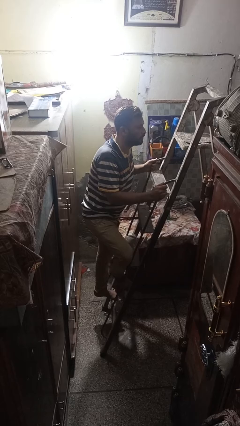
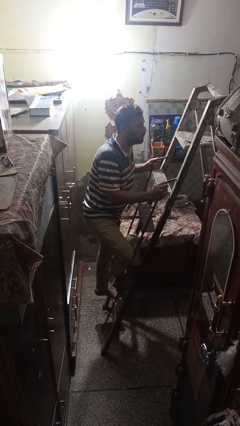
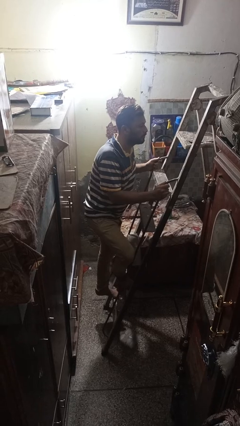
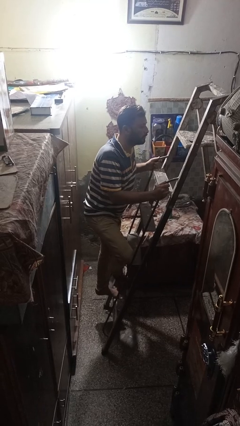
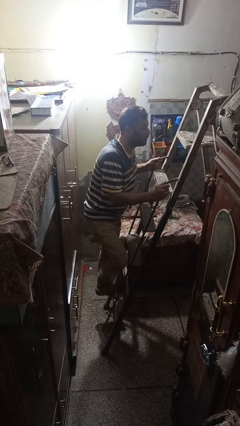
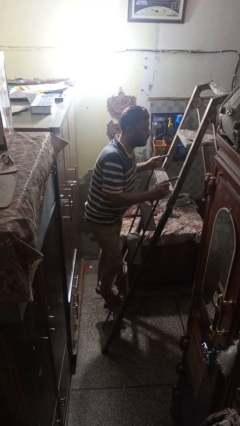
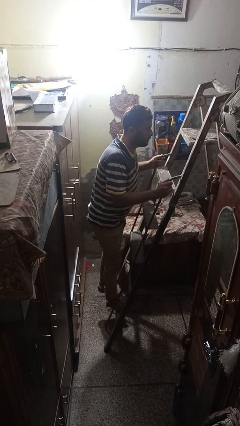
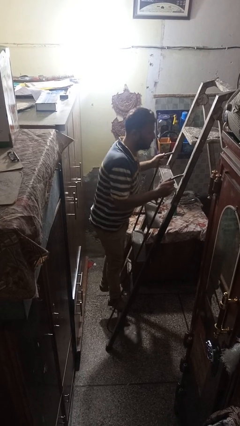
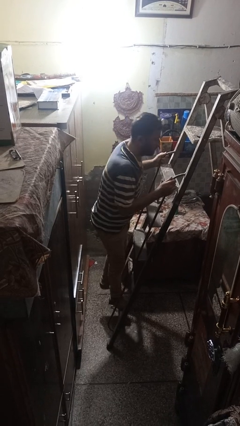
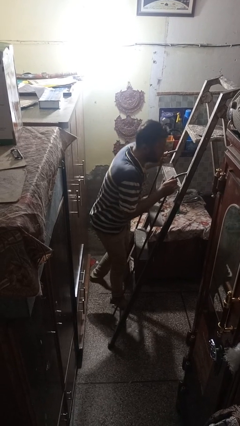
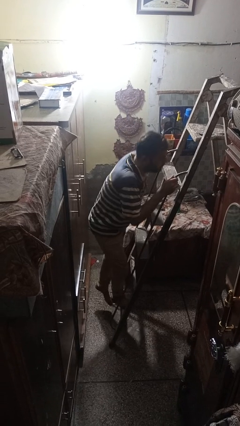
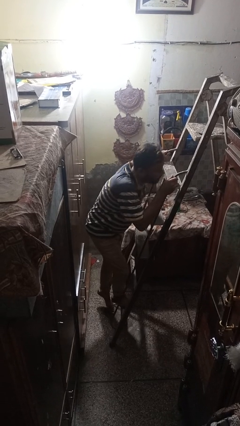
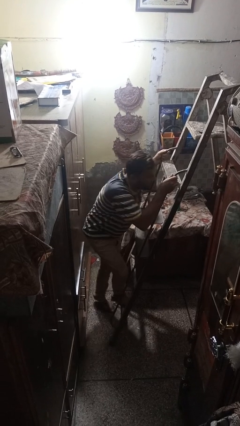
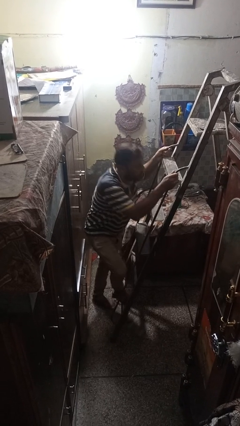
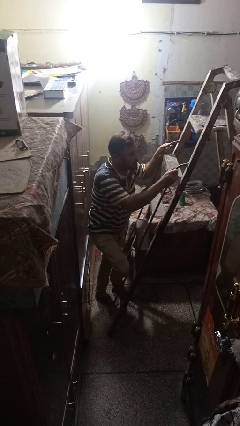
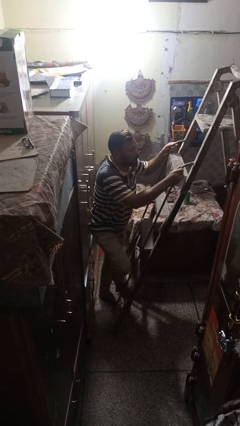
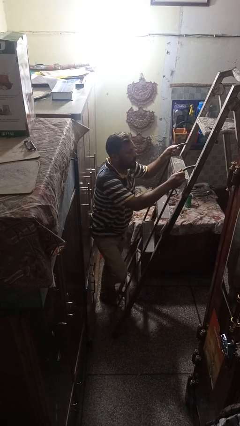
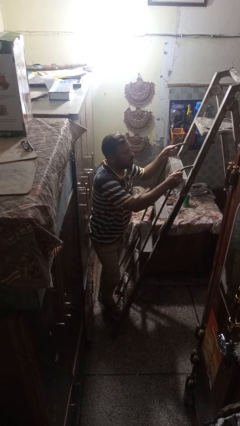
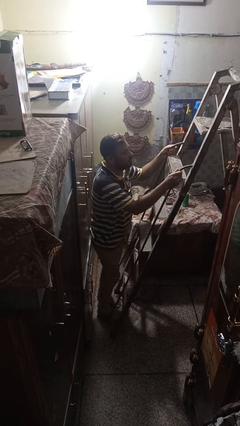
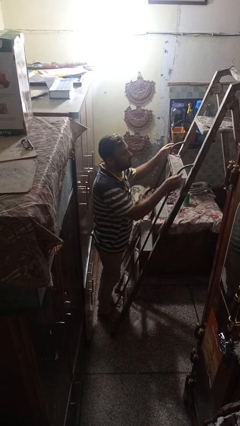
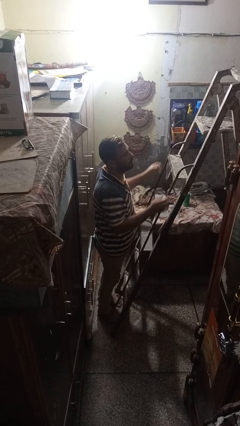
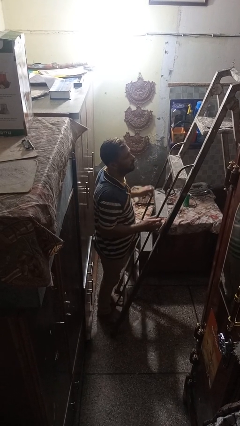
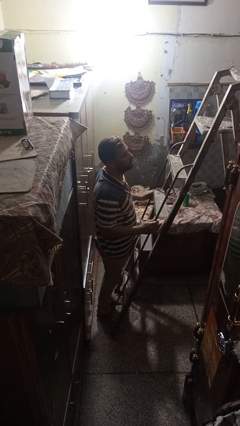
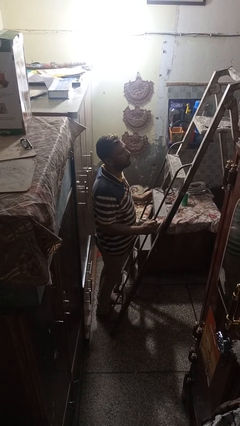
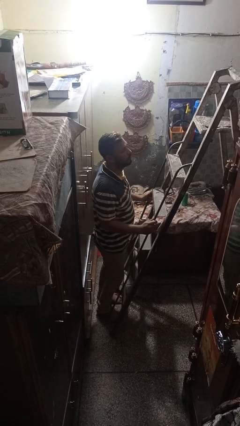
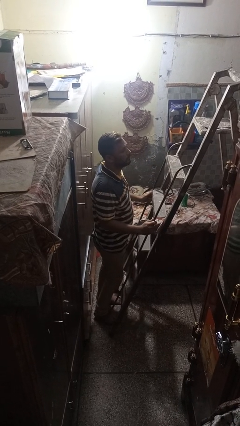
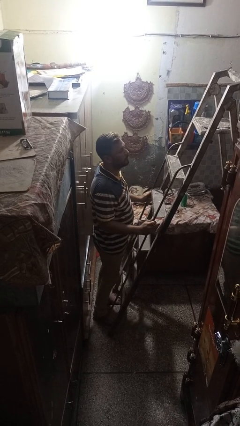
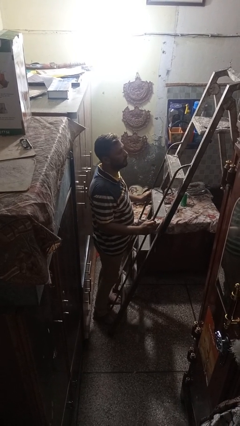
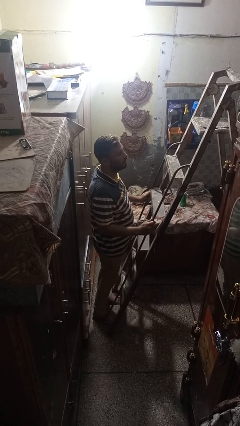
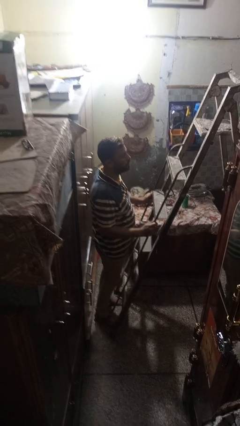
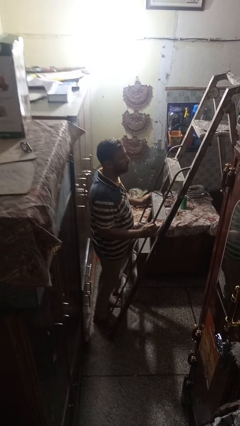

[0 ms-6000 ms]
person climbs down ladder

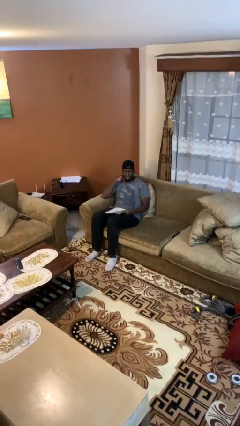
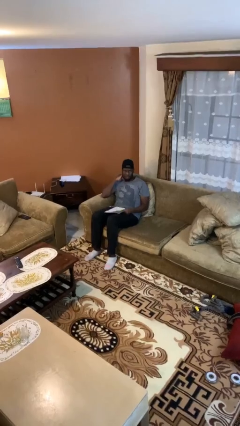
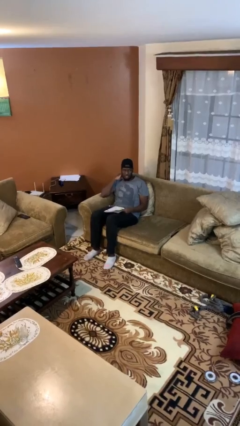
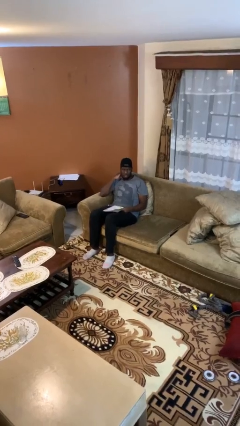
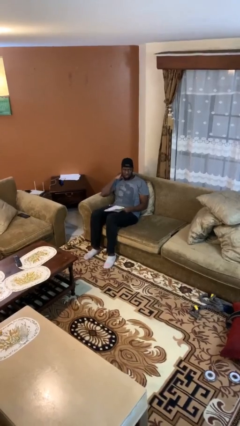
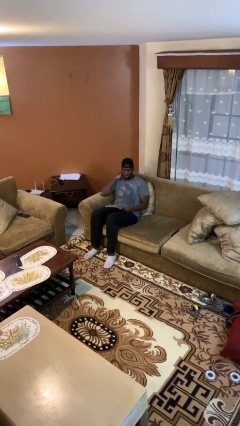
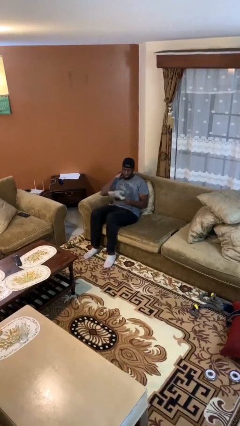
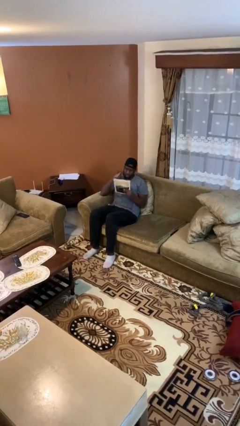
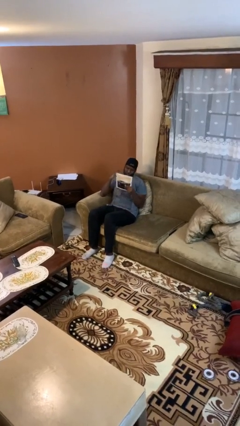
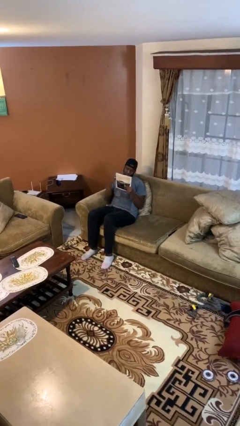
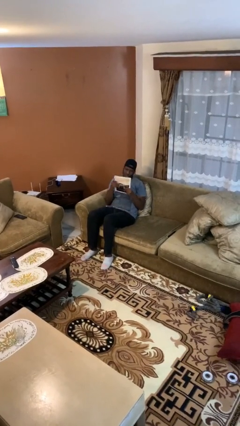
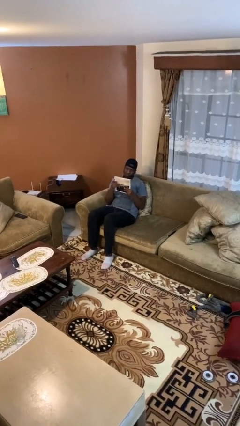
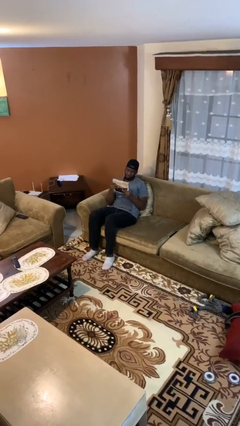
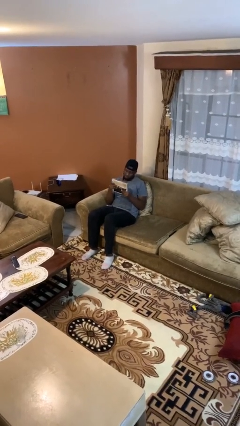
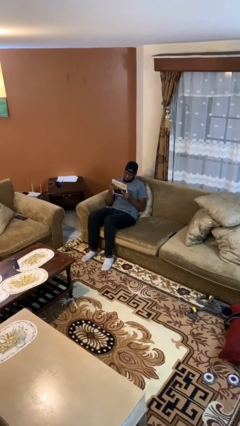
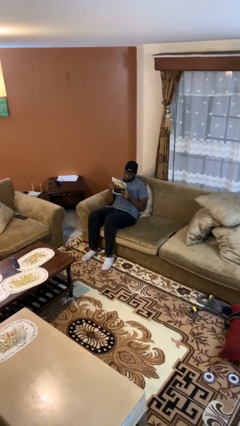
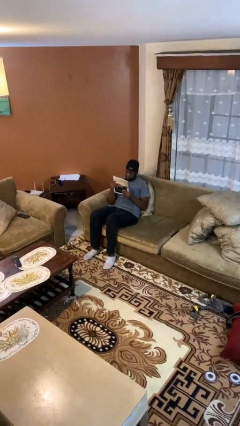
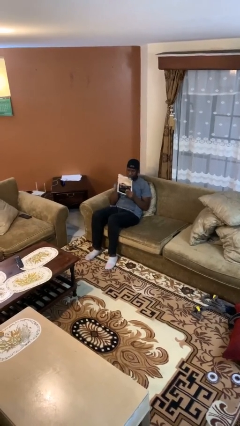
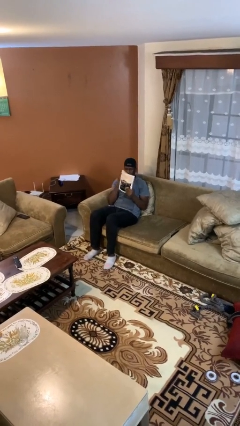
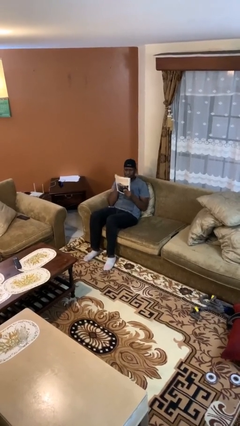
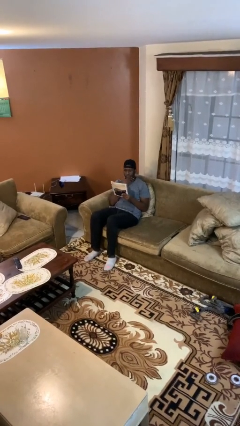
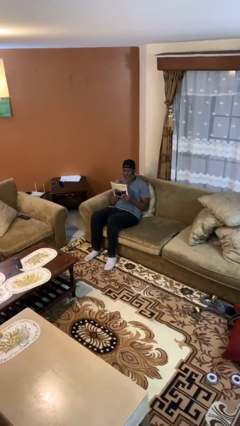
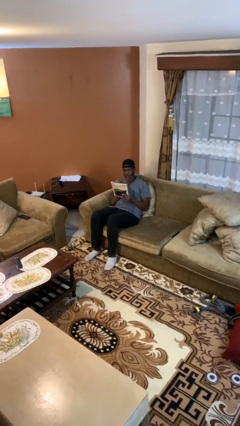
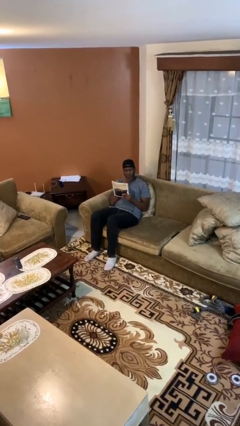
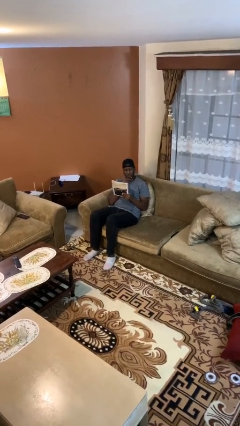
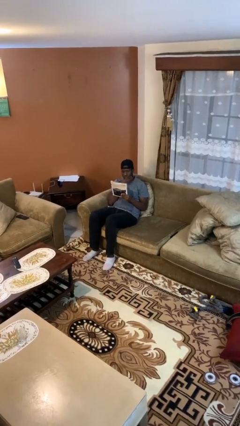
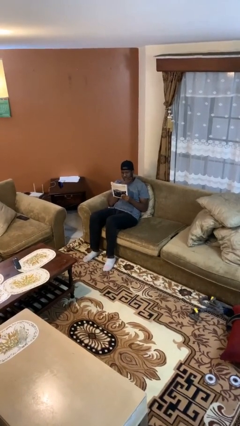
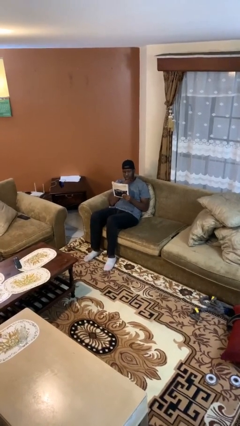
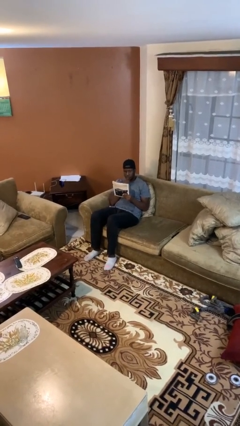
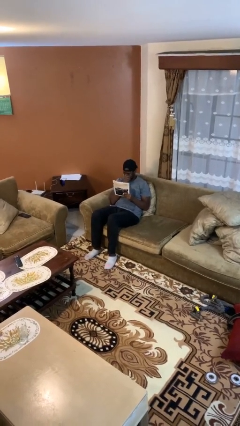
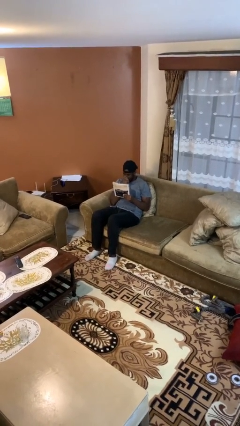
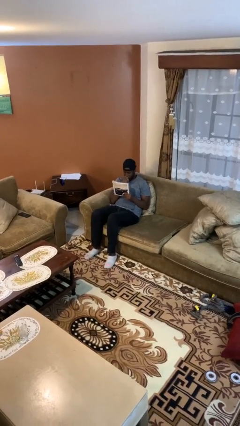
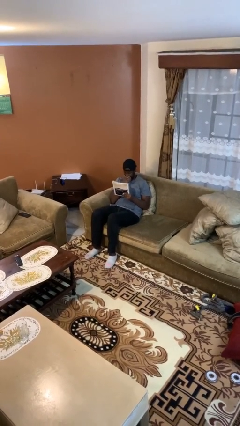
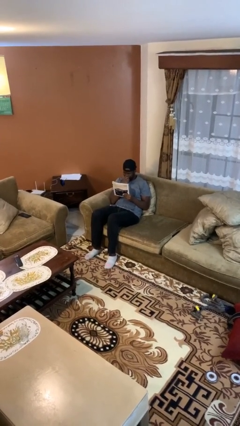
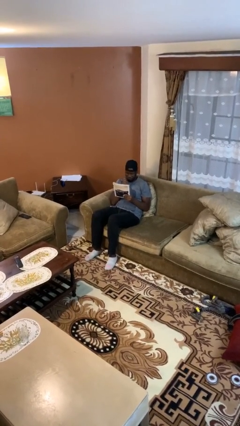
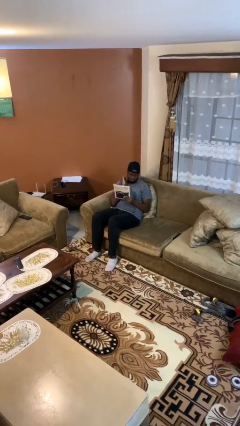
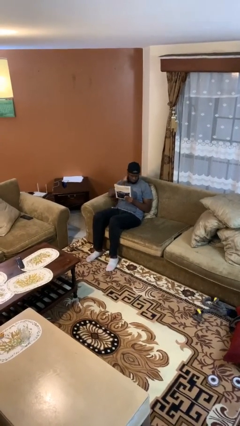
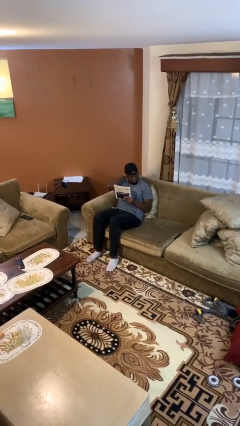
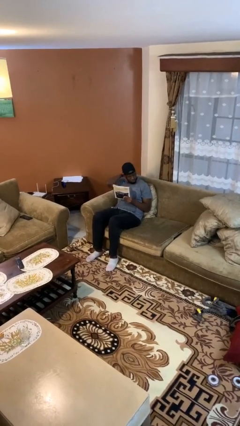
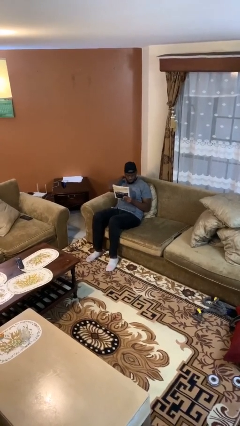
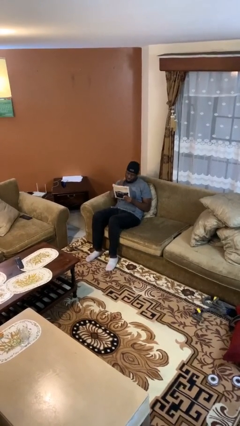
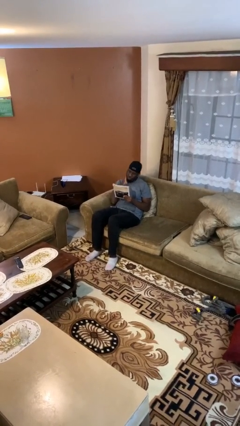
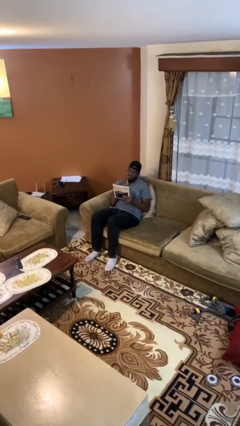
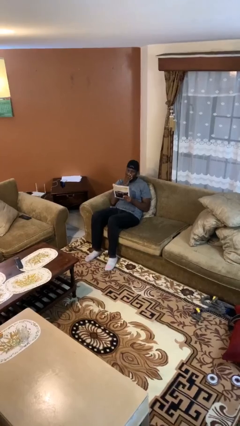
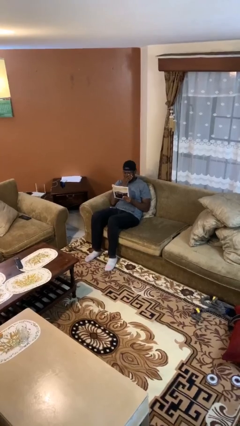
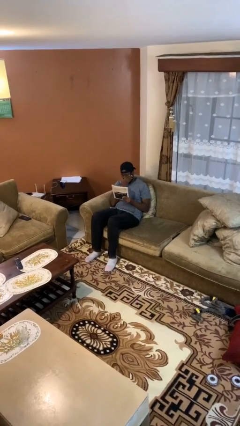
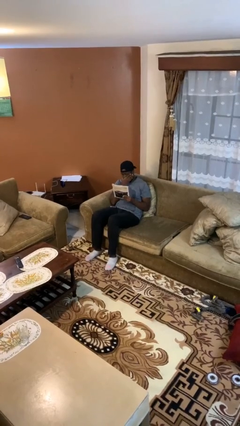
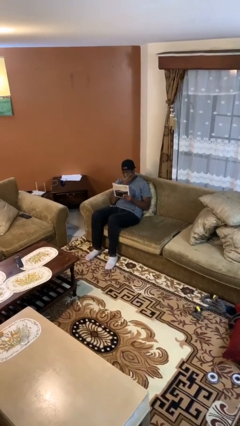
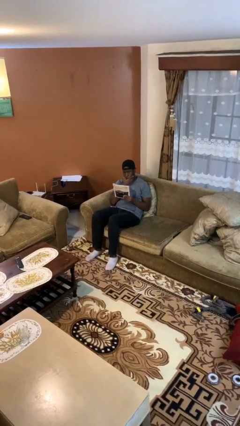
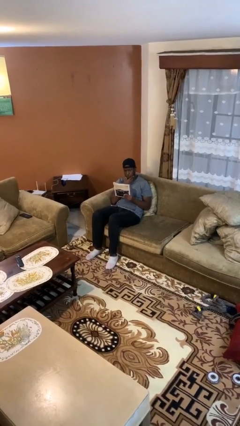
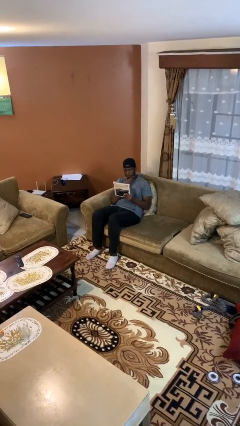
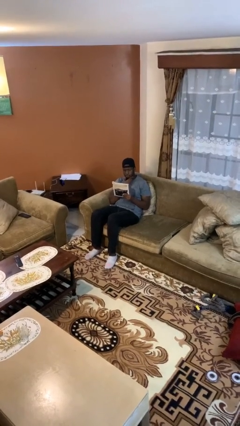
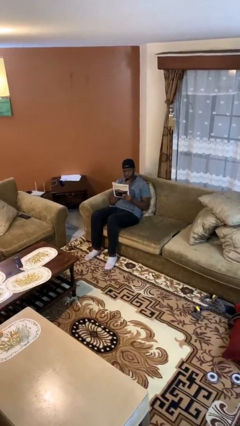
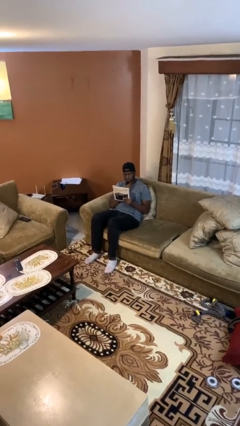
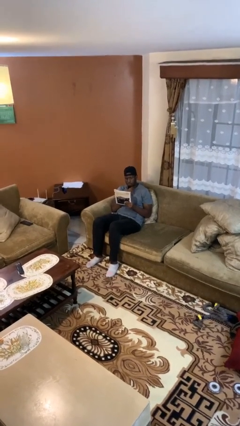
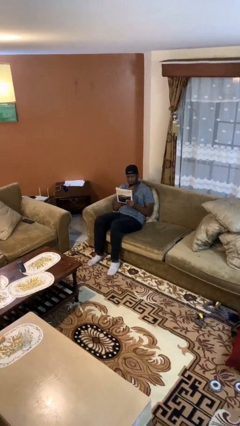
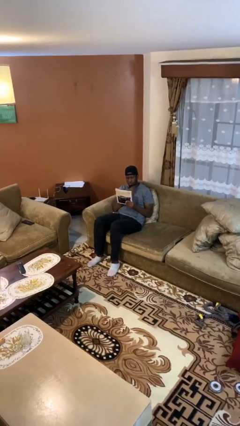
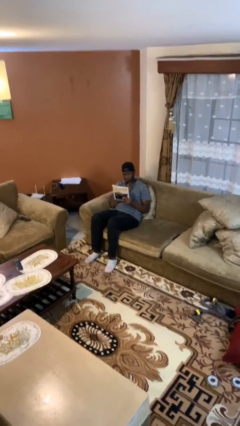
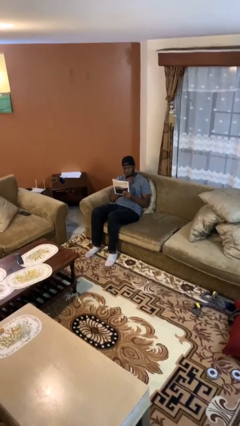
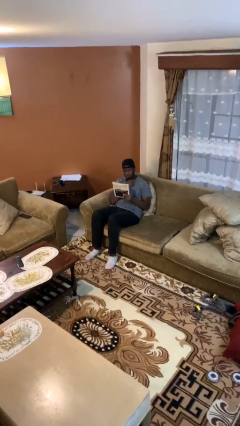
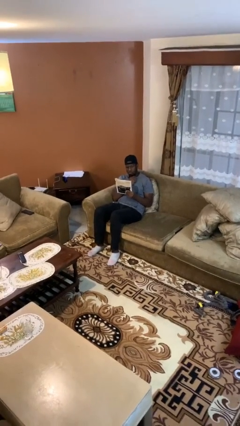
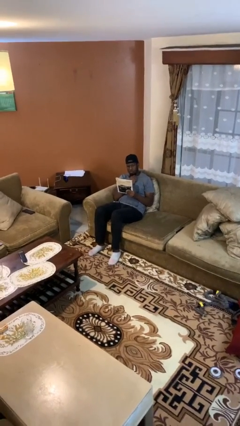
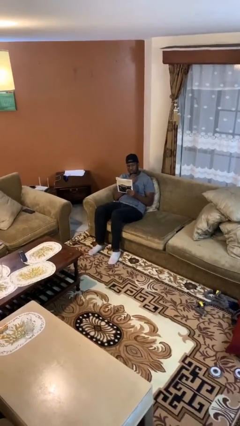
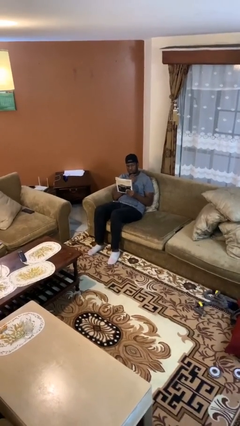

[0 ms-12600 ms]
person reads document
